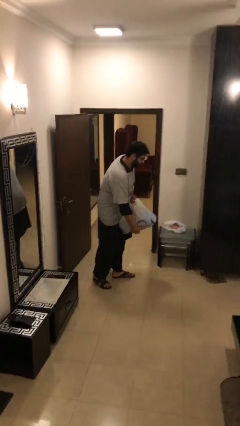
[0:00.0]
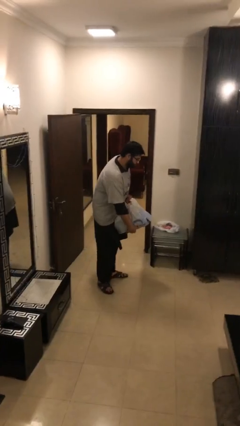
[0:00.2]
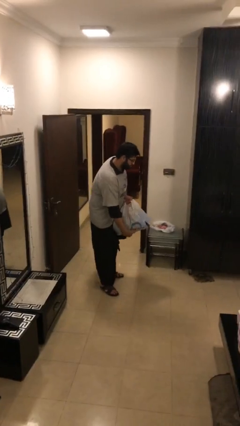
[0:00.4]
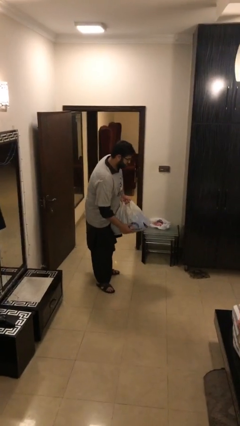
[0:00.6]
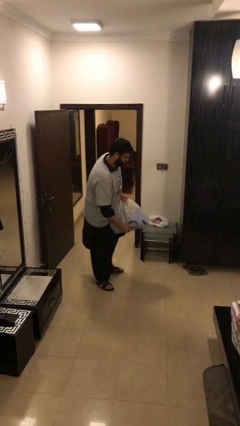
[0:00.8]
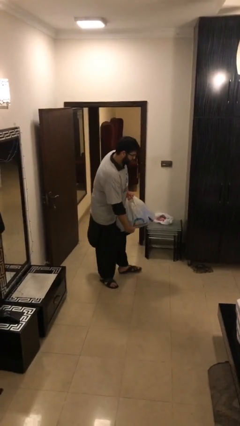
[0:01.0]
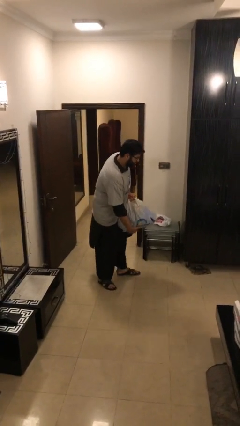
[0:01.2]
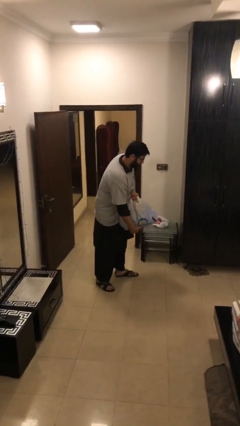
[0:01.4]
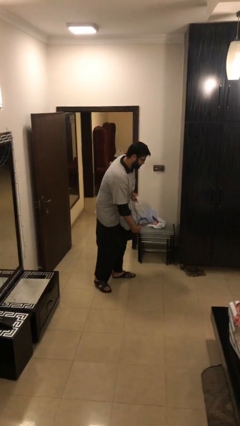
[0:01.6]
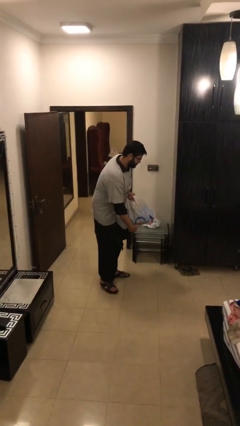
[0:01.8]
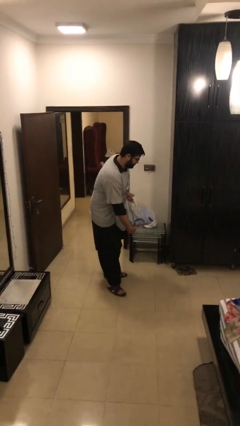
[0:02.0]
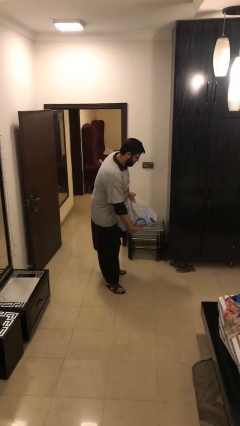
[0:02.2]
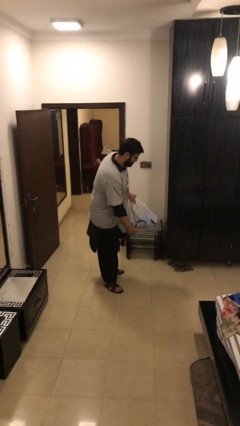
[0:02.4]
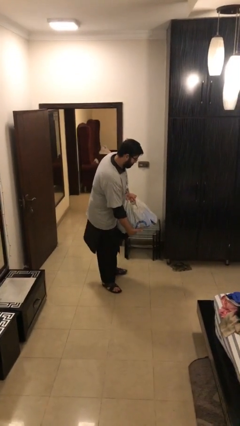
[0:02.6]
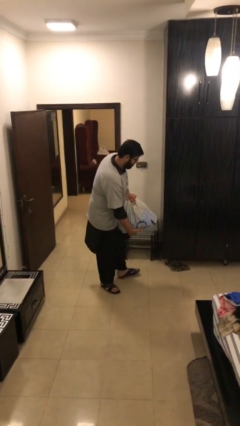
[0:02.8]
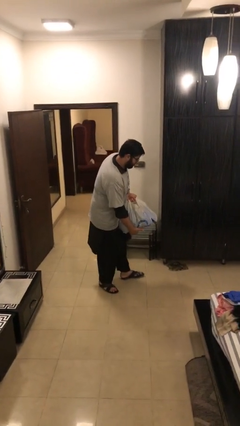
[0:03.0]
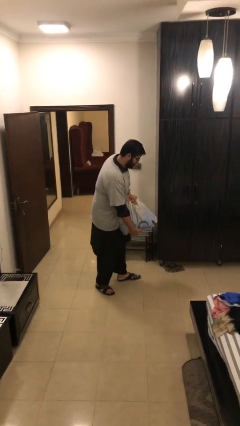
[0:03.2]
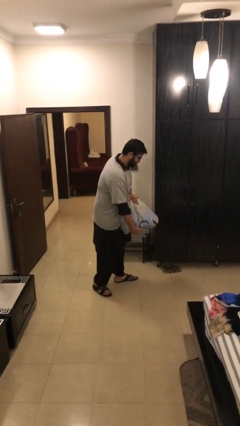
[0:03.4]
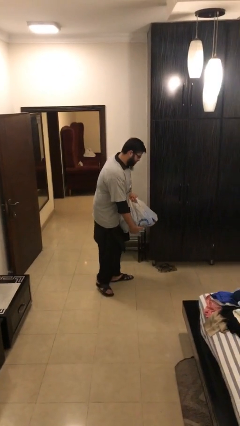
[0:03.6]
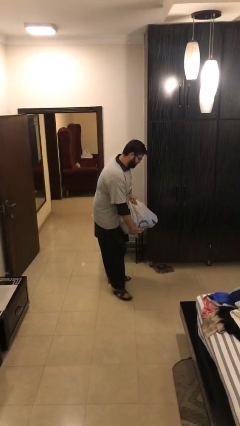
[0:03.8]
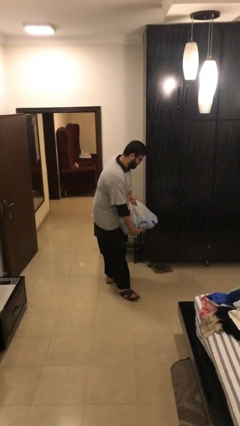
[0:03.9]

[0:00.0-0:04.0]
person carries heavy object

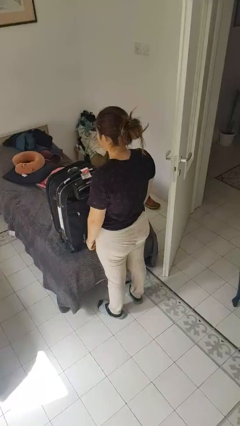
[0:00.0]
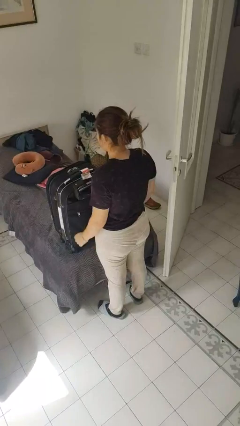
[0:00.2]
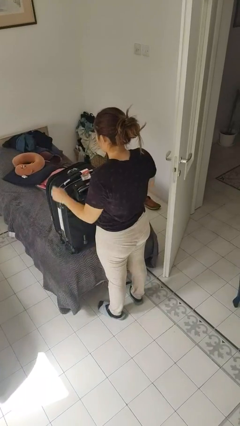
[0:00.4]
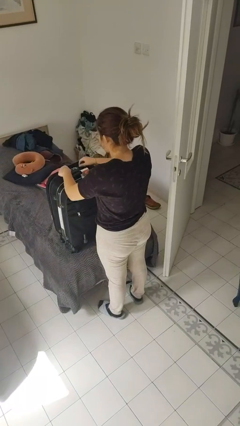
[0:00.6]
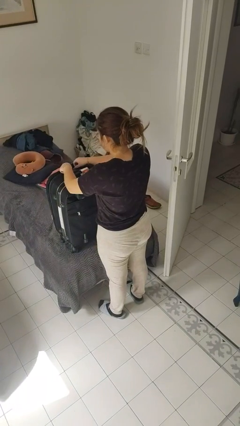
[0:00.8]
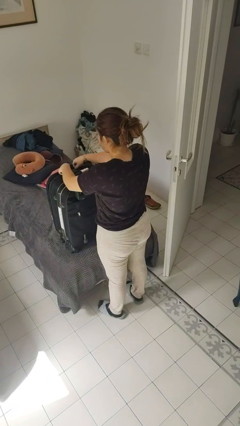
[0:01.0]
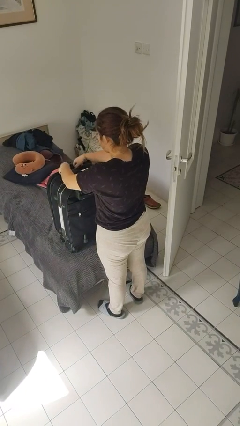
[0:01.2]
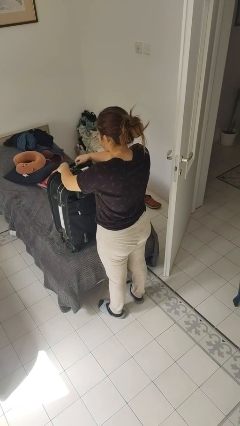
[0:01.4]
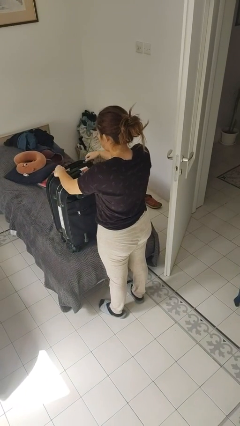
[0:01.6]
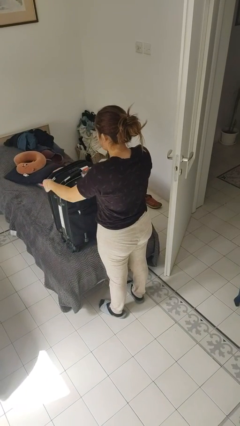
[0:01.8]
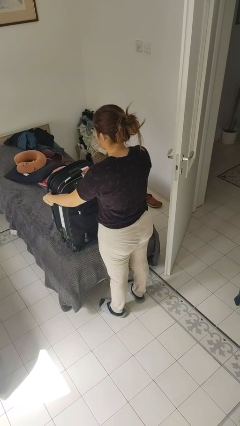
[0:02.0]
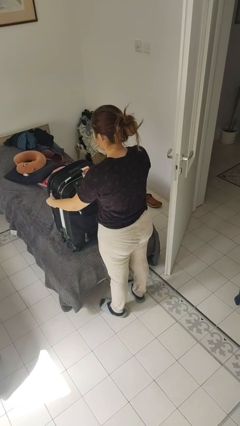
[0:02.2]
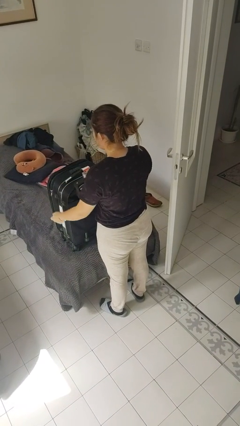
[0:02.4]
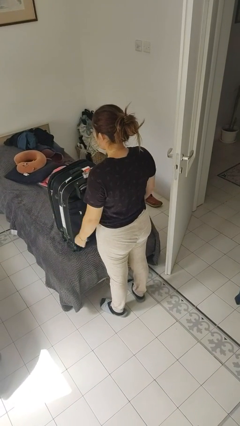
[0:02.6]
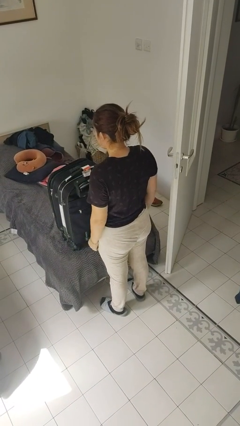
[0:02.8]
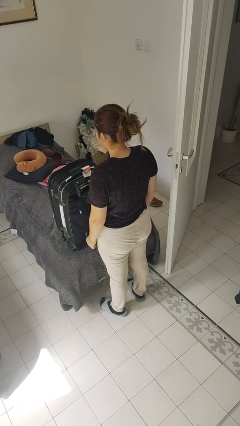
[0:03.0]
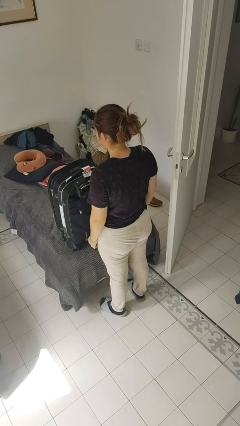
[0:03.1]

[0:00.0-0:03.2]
person opens suitcase

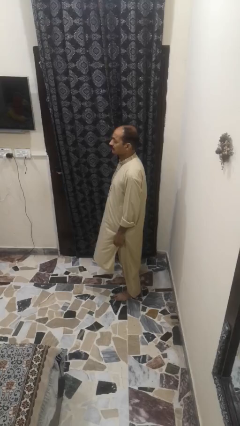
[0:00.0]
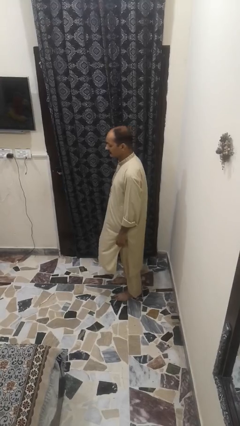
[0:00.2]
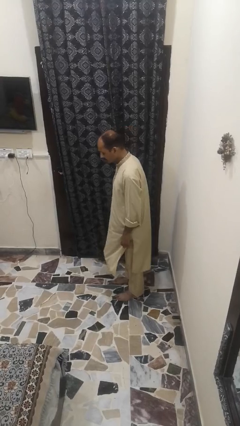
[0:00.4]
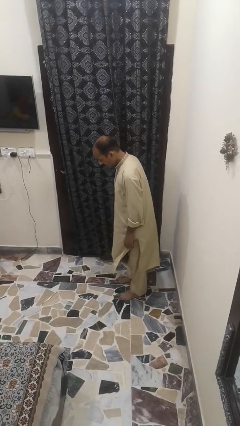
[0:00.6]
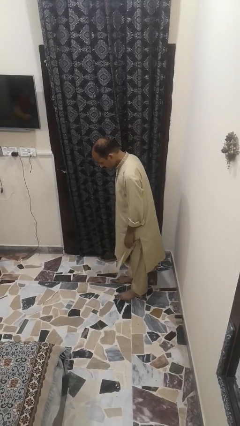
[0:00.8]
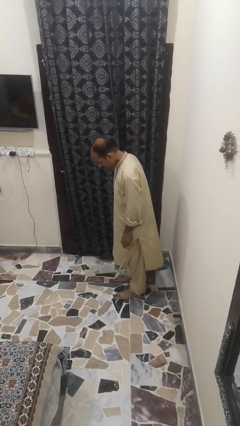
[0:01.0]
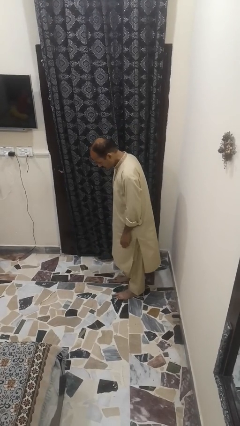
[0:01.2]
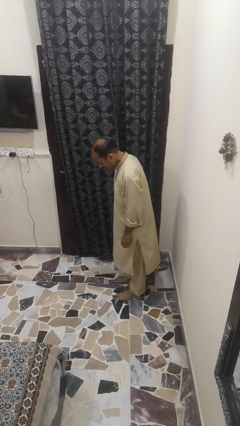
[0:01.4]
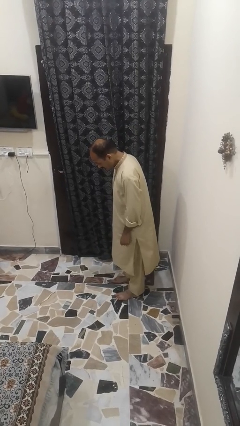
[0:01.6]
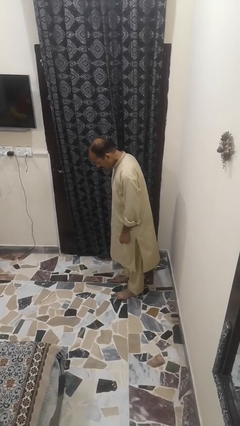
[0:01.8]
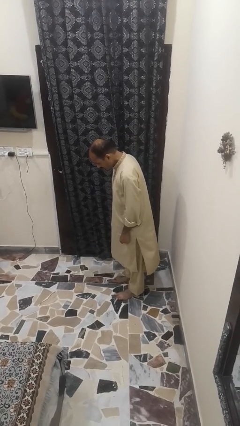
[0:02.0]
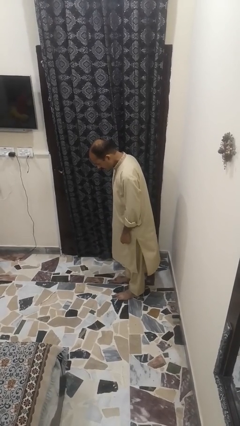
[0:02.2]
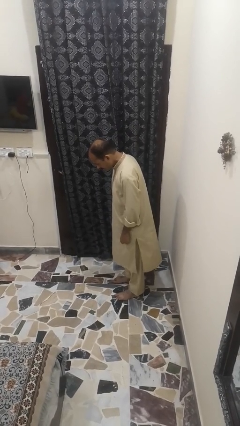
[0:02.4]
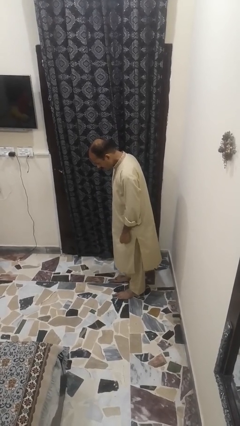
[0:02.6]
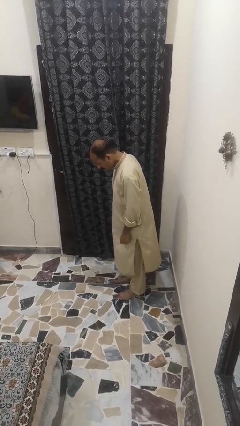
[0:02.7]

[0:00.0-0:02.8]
person bows

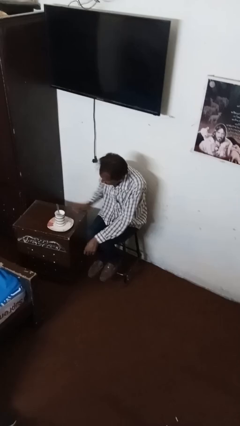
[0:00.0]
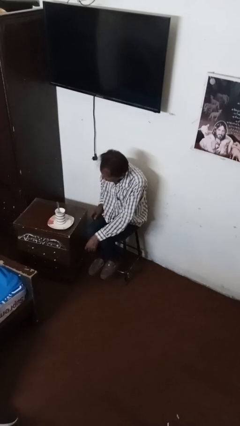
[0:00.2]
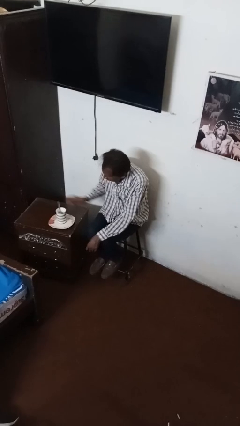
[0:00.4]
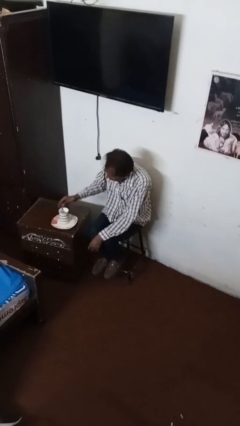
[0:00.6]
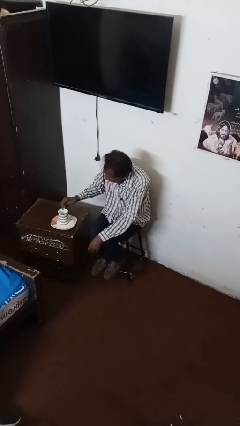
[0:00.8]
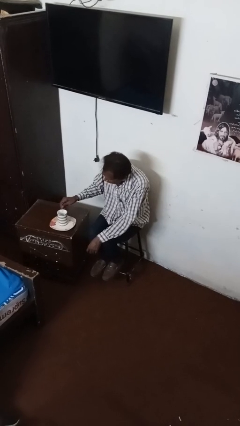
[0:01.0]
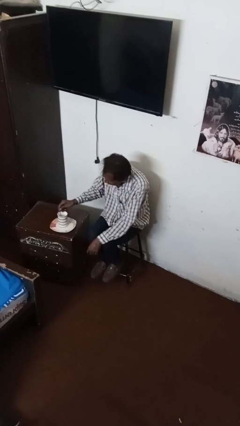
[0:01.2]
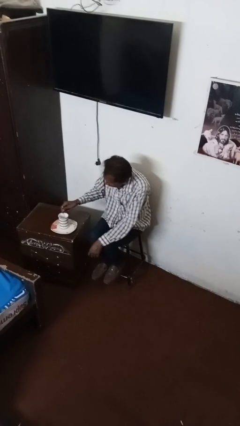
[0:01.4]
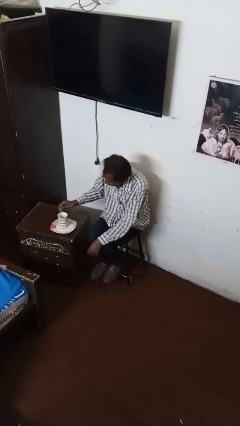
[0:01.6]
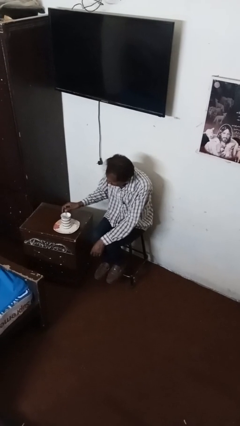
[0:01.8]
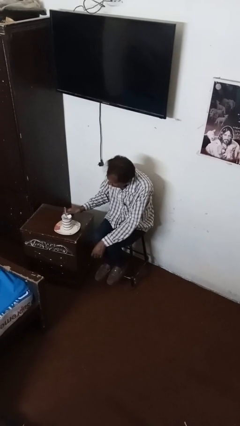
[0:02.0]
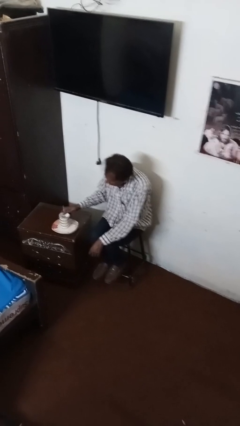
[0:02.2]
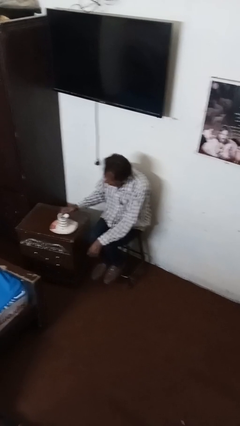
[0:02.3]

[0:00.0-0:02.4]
person stirs mug

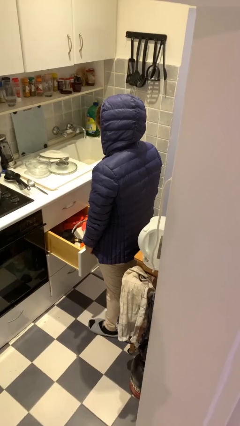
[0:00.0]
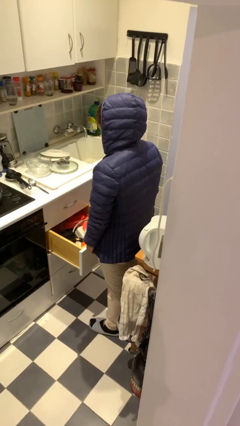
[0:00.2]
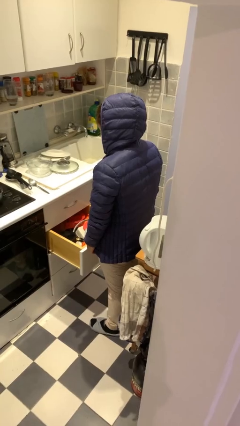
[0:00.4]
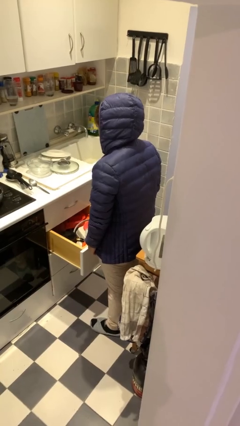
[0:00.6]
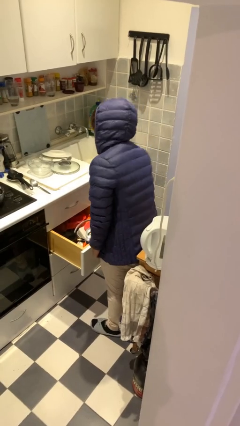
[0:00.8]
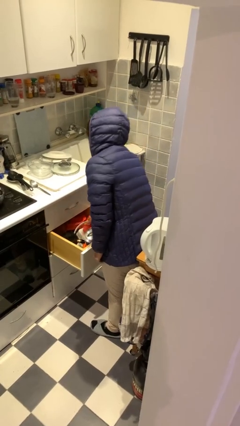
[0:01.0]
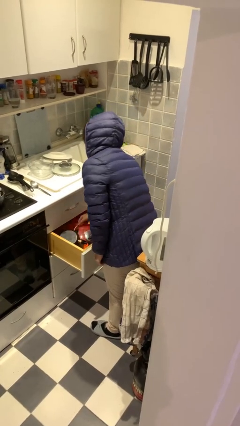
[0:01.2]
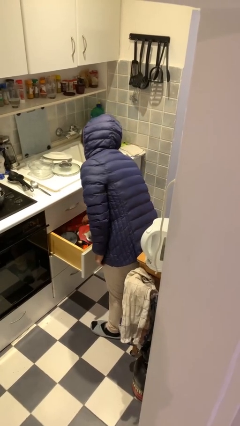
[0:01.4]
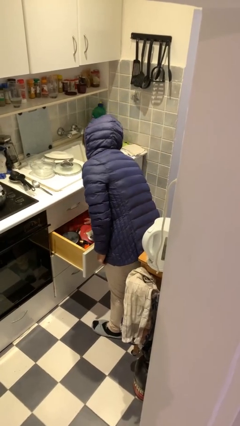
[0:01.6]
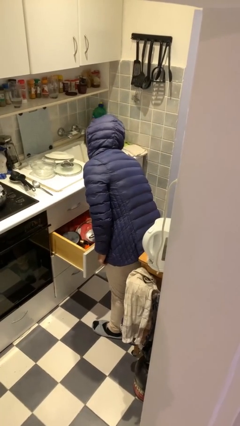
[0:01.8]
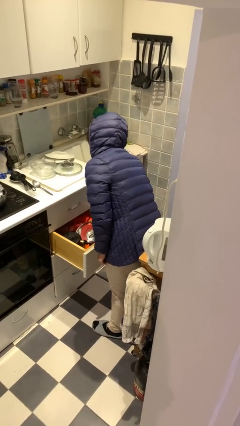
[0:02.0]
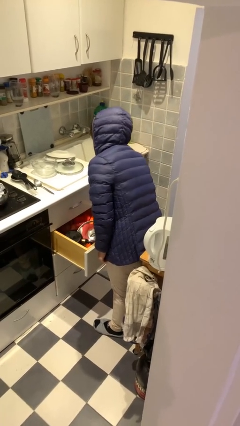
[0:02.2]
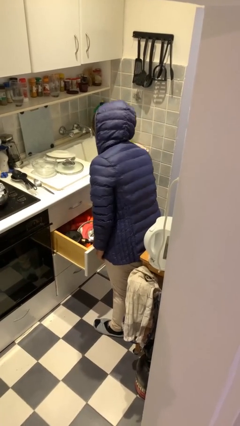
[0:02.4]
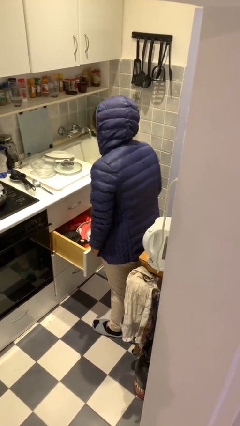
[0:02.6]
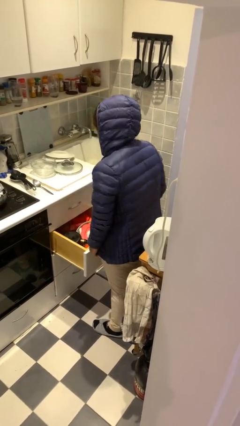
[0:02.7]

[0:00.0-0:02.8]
person searches in kitchen drawer

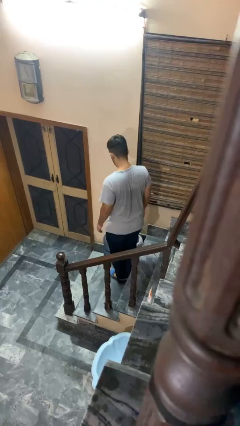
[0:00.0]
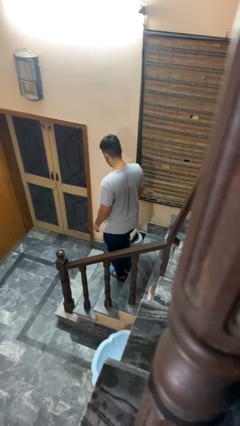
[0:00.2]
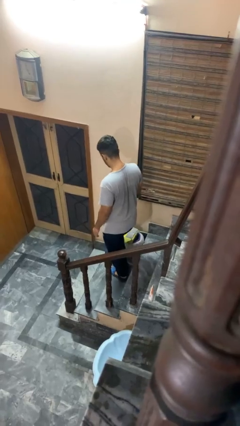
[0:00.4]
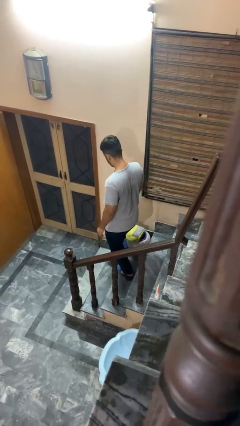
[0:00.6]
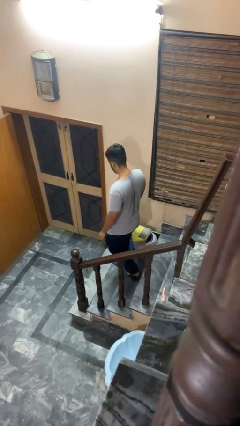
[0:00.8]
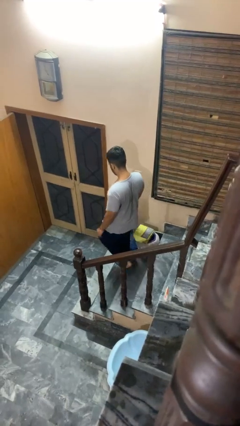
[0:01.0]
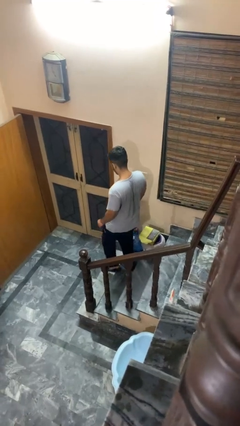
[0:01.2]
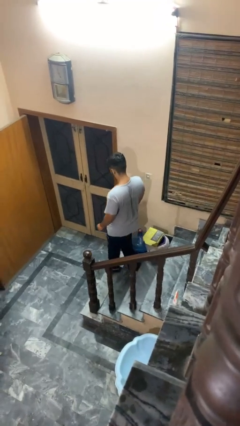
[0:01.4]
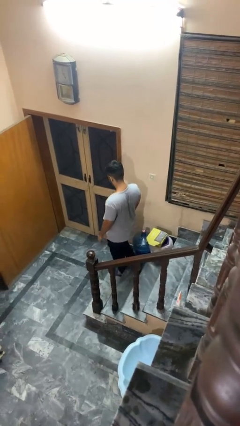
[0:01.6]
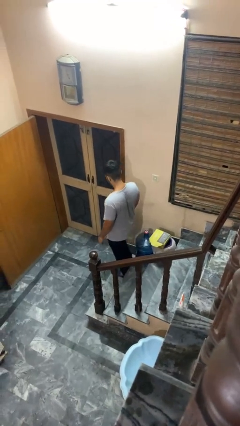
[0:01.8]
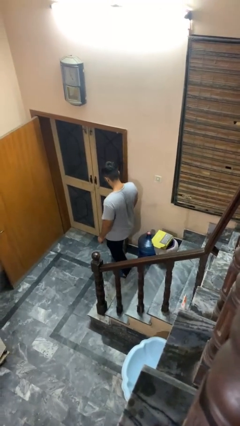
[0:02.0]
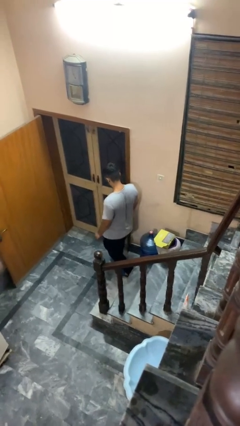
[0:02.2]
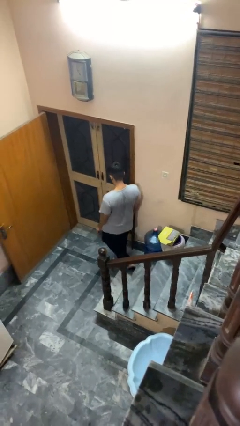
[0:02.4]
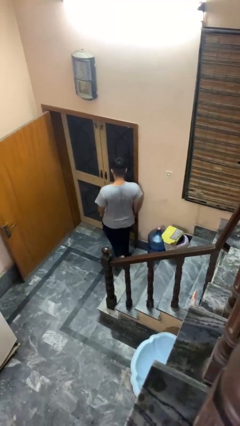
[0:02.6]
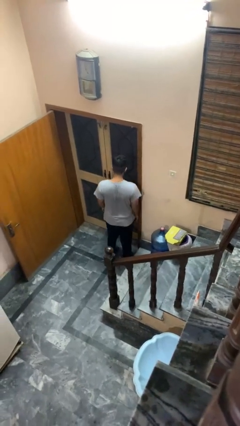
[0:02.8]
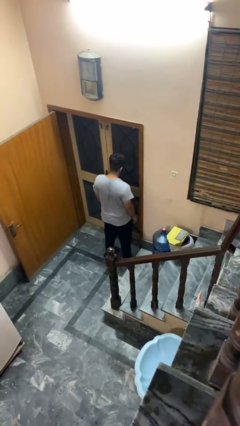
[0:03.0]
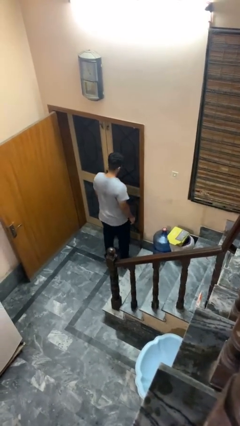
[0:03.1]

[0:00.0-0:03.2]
person climbs down stairs
